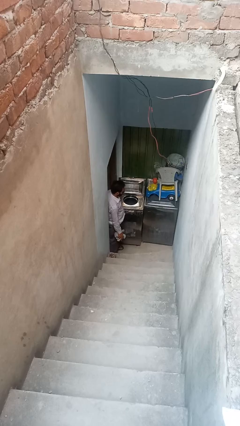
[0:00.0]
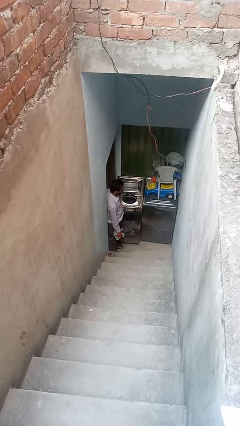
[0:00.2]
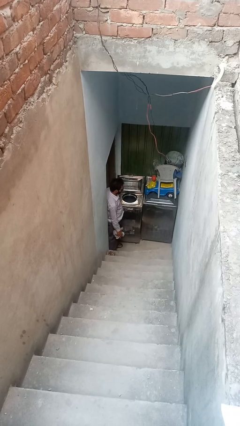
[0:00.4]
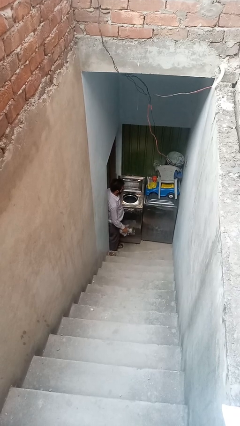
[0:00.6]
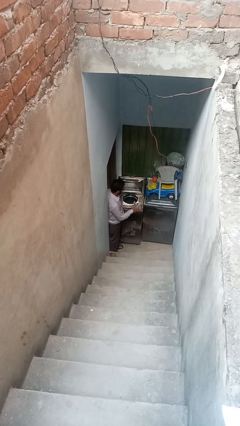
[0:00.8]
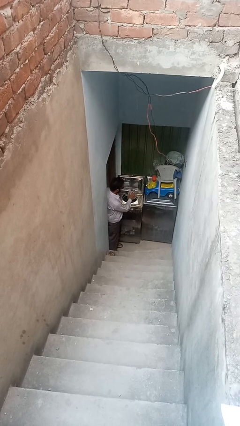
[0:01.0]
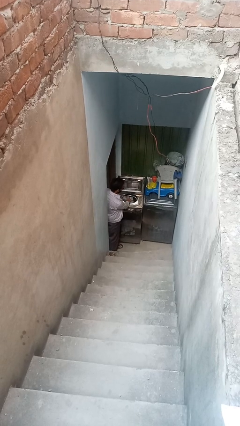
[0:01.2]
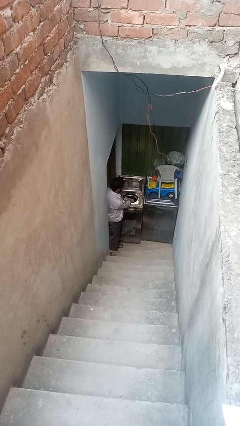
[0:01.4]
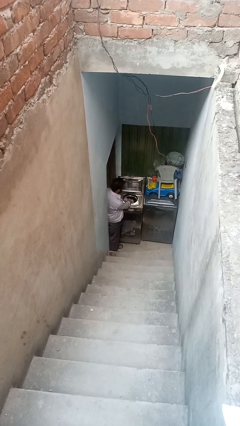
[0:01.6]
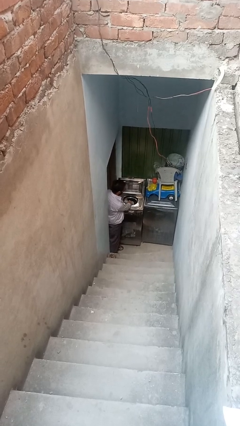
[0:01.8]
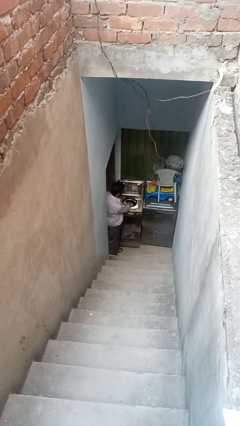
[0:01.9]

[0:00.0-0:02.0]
person loads clotheswasher

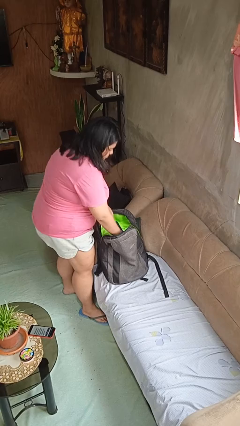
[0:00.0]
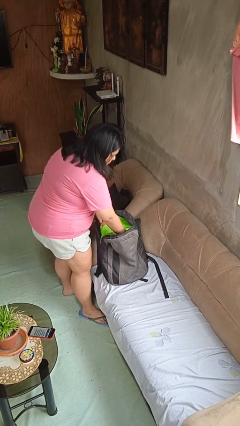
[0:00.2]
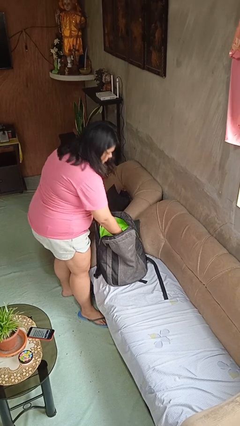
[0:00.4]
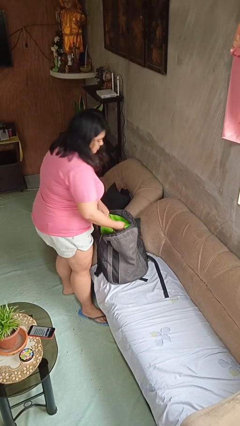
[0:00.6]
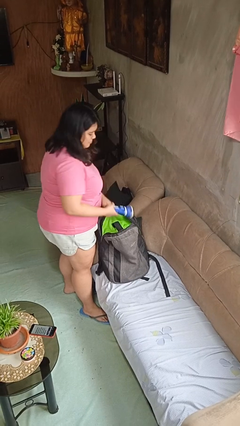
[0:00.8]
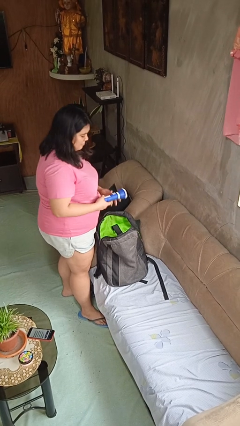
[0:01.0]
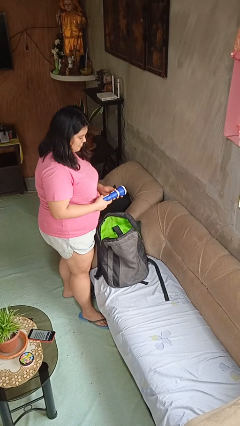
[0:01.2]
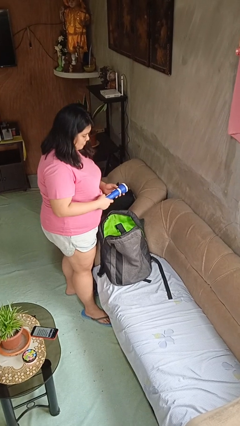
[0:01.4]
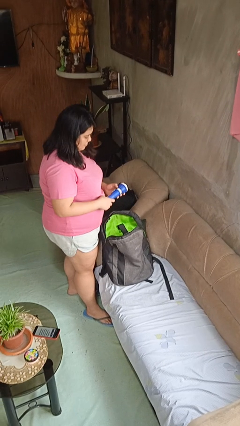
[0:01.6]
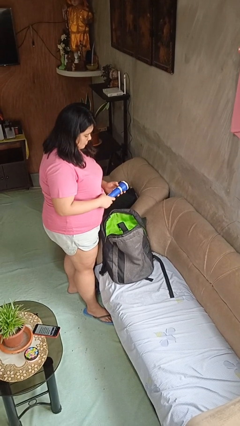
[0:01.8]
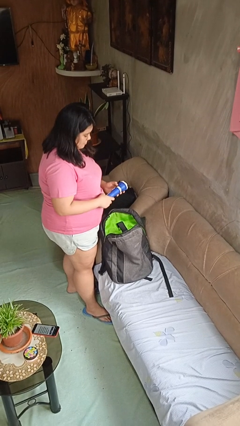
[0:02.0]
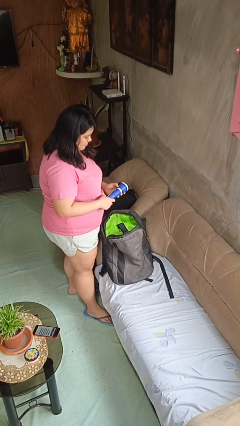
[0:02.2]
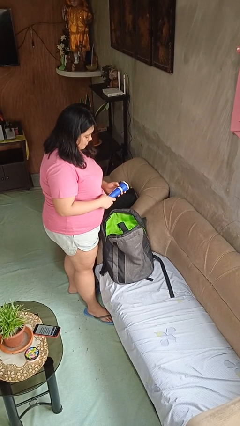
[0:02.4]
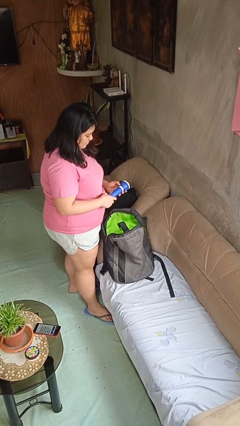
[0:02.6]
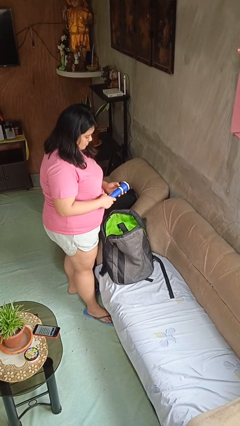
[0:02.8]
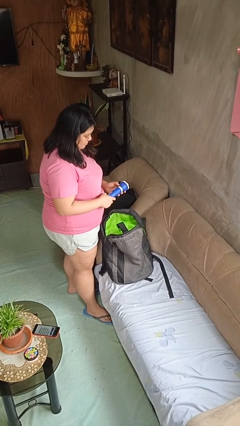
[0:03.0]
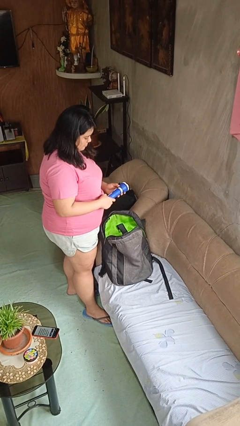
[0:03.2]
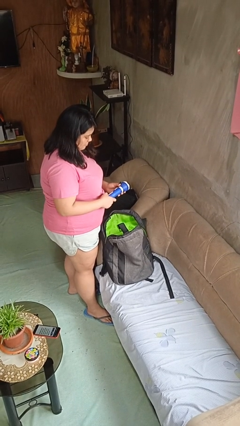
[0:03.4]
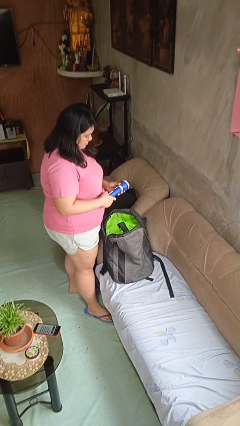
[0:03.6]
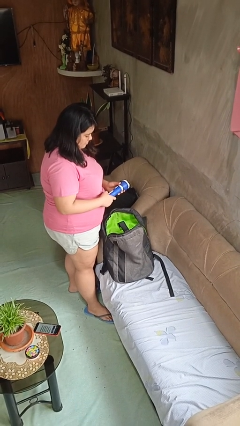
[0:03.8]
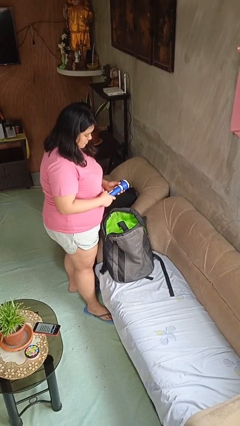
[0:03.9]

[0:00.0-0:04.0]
person takes object from backpack

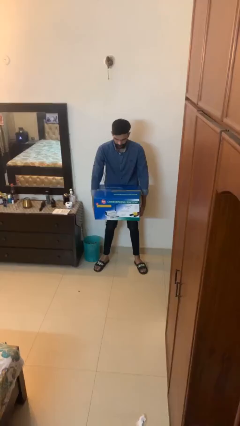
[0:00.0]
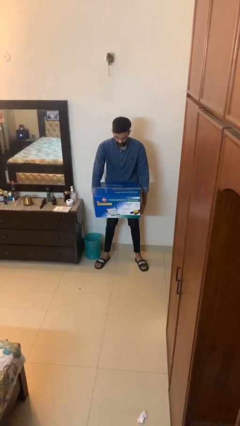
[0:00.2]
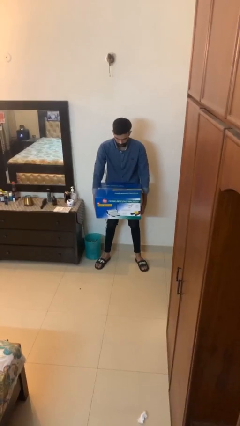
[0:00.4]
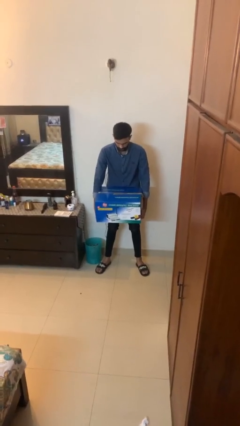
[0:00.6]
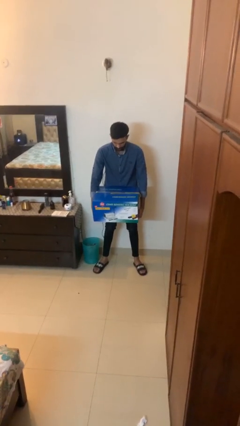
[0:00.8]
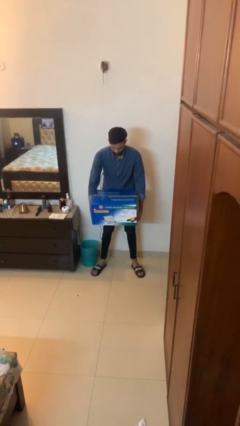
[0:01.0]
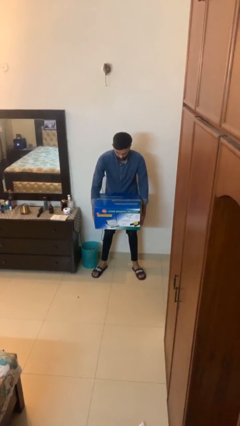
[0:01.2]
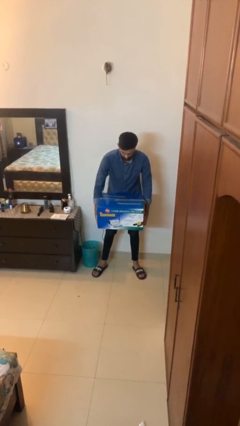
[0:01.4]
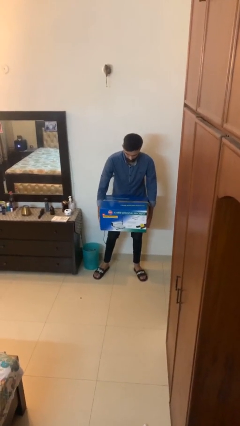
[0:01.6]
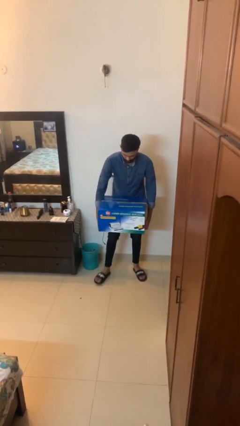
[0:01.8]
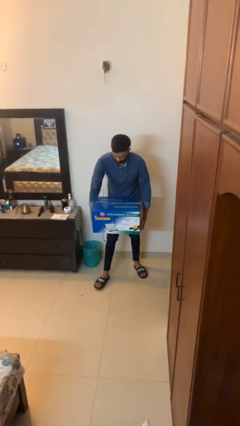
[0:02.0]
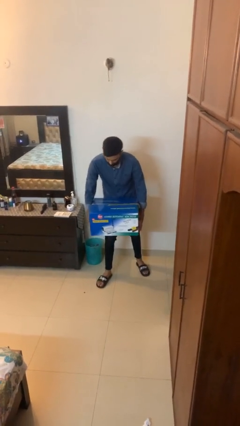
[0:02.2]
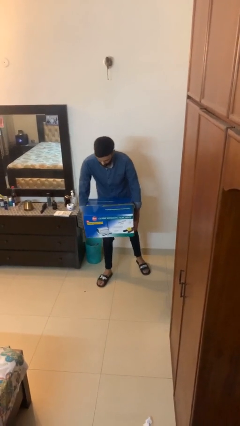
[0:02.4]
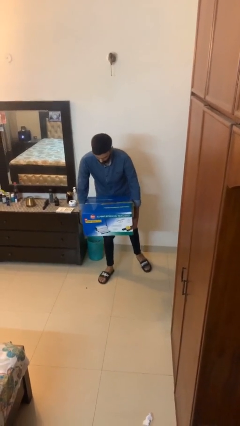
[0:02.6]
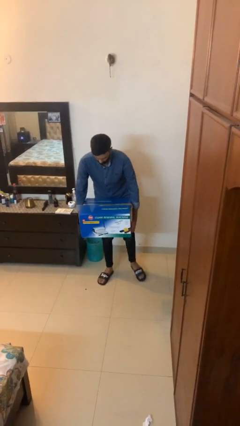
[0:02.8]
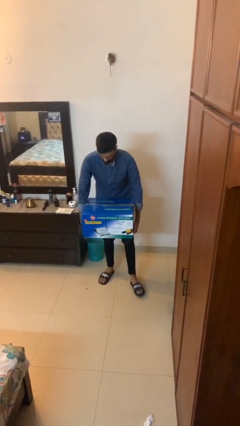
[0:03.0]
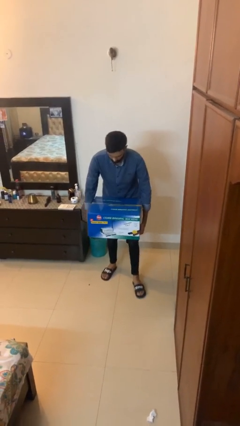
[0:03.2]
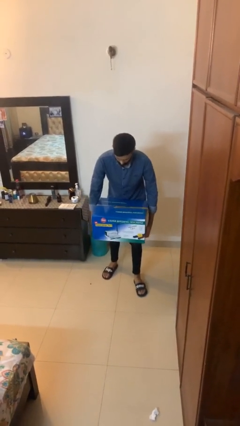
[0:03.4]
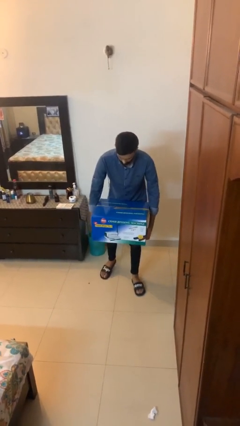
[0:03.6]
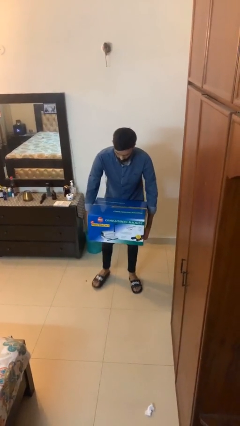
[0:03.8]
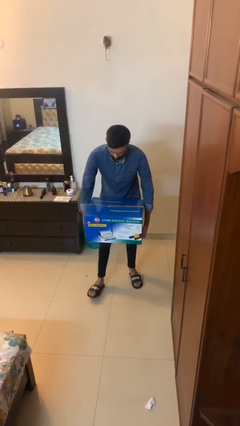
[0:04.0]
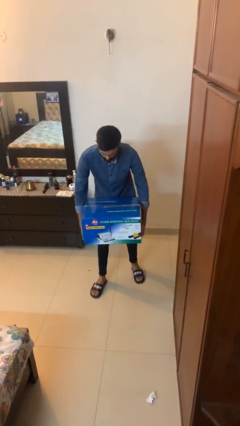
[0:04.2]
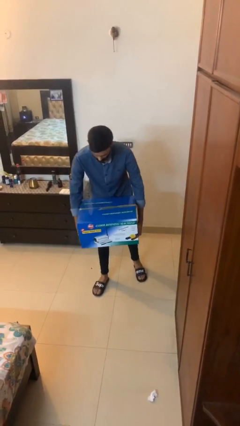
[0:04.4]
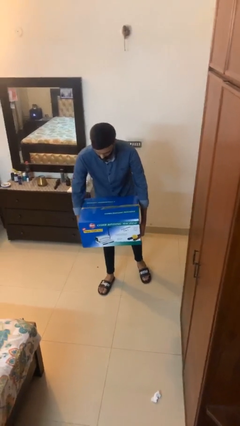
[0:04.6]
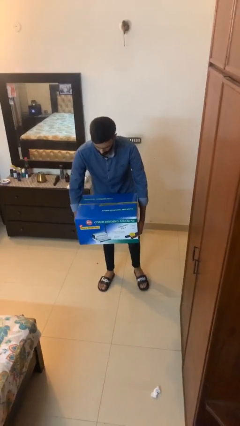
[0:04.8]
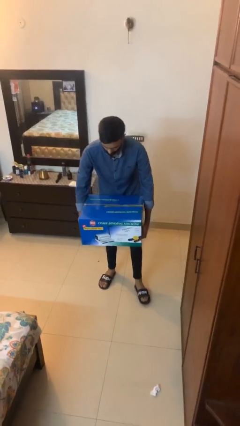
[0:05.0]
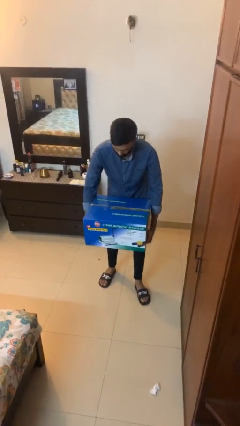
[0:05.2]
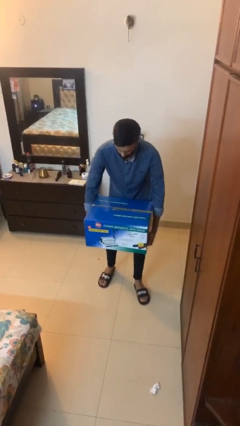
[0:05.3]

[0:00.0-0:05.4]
person carries heavy object

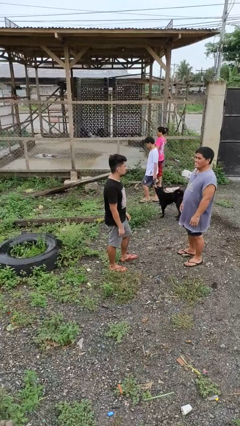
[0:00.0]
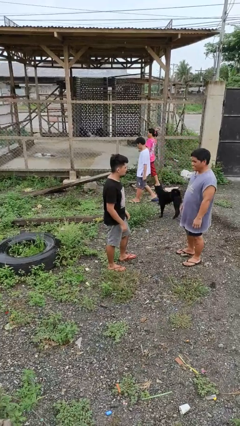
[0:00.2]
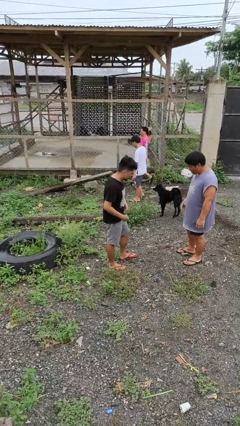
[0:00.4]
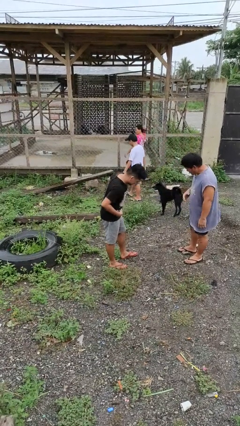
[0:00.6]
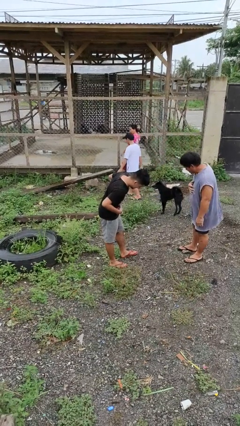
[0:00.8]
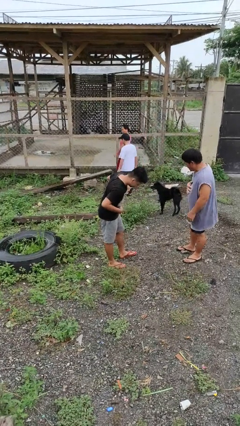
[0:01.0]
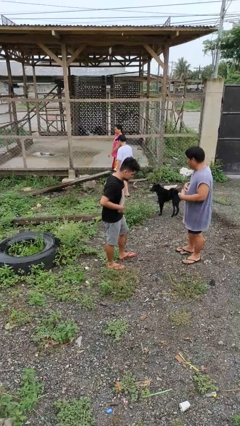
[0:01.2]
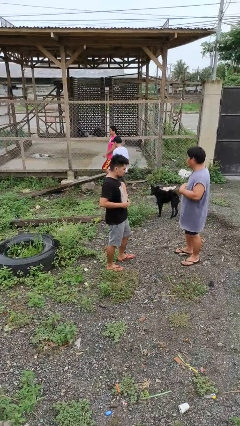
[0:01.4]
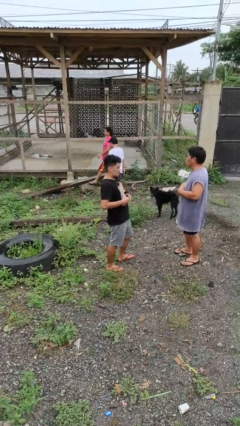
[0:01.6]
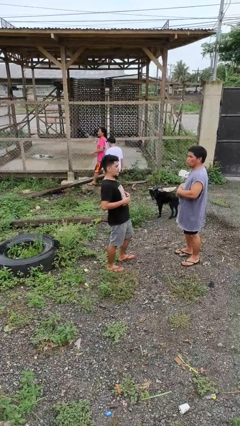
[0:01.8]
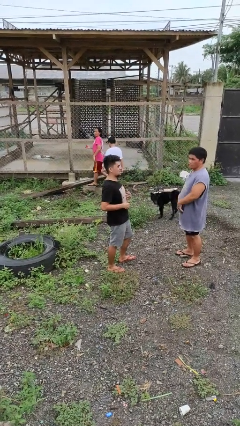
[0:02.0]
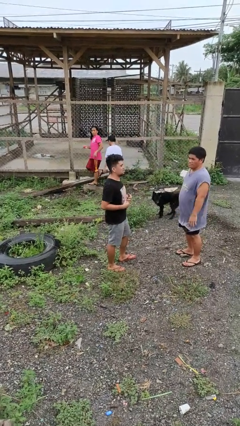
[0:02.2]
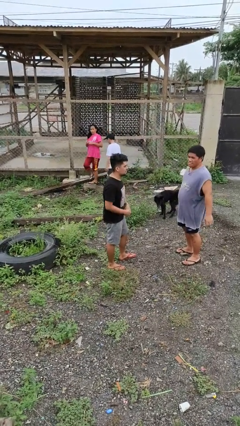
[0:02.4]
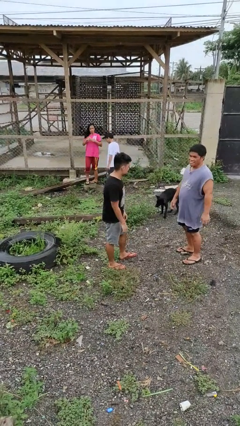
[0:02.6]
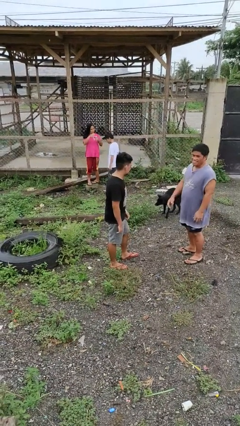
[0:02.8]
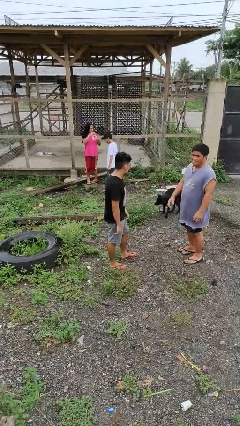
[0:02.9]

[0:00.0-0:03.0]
person laughs with person

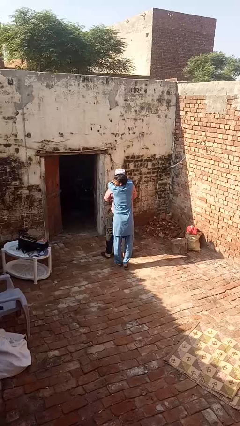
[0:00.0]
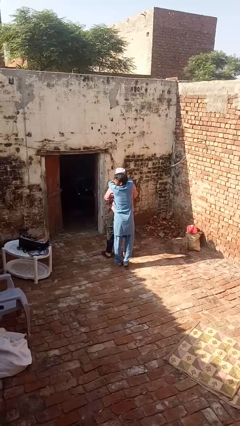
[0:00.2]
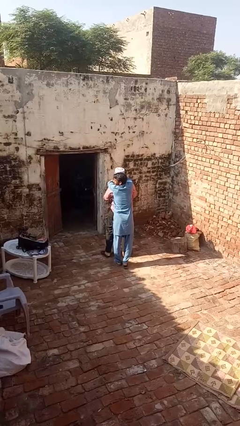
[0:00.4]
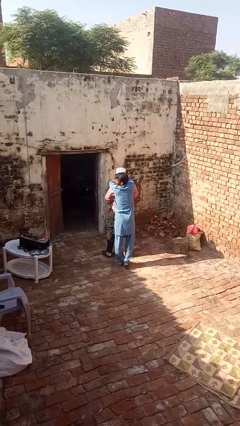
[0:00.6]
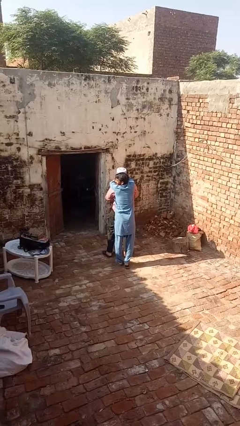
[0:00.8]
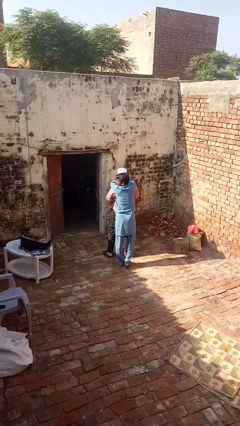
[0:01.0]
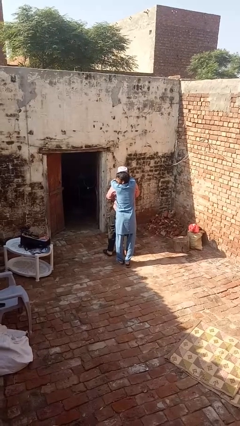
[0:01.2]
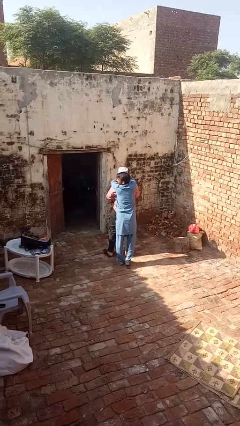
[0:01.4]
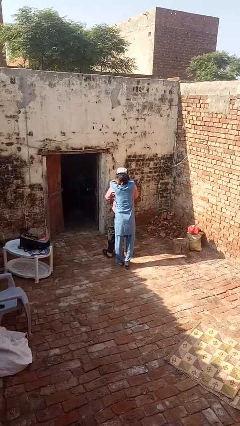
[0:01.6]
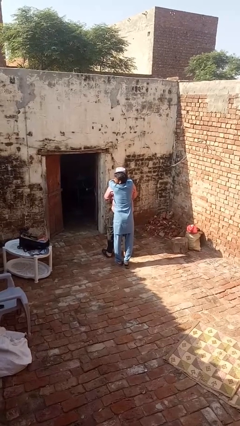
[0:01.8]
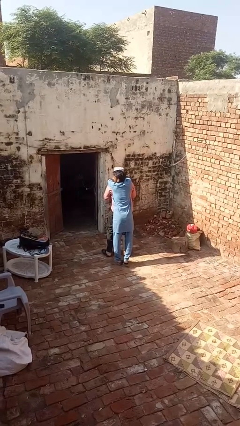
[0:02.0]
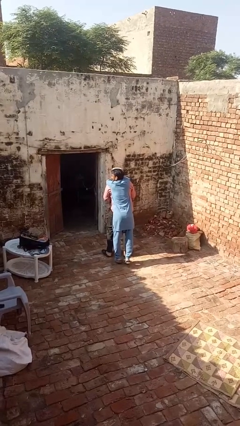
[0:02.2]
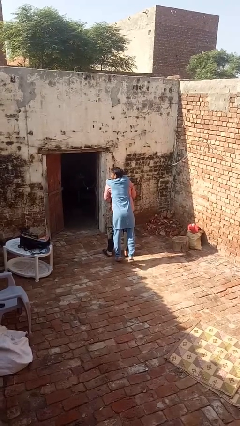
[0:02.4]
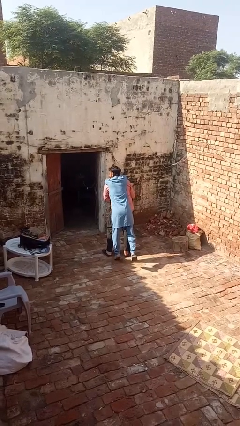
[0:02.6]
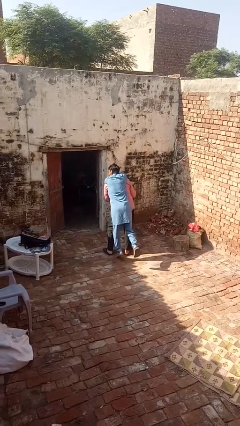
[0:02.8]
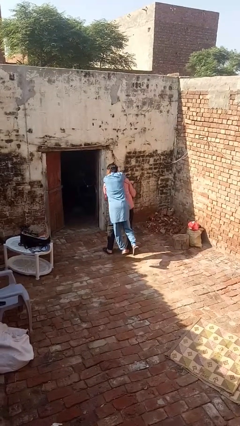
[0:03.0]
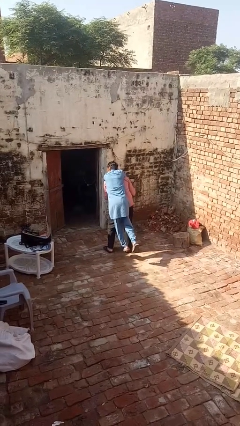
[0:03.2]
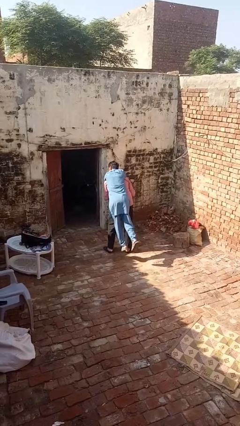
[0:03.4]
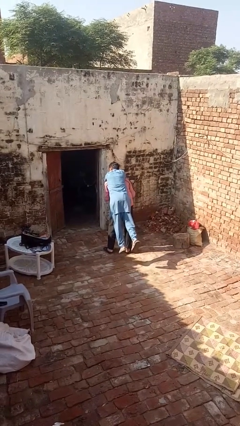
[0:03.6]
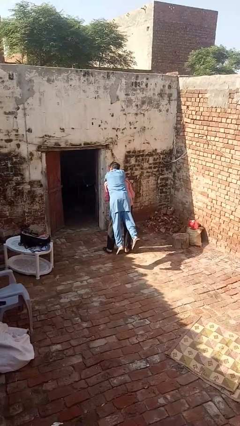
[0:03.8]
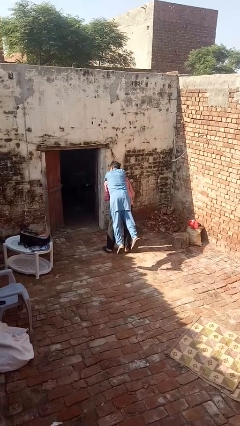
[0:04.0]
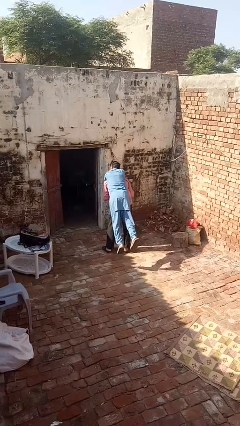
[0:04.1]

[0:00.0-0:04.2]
person carries person over shoulder
